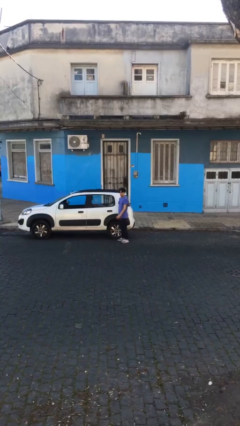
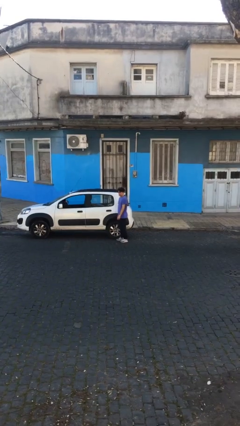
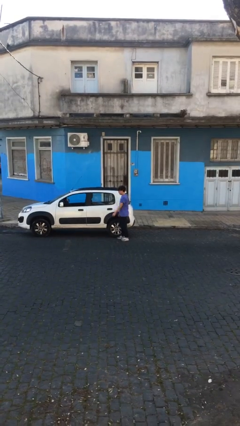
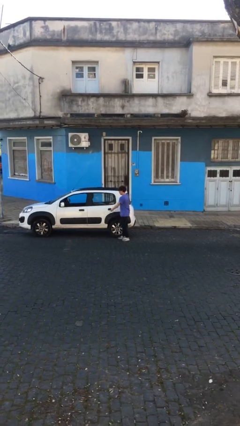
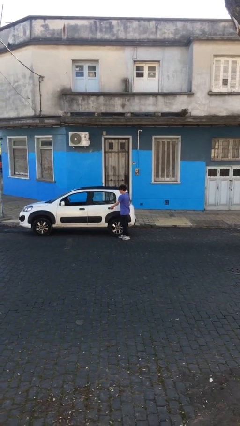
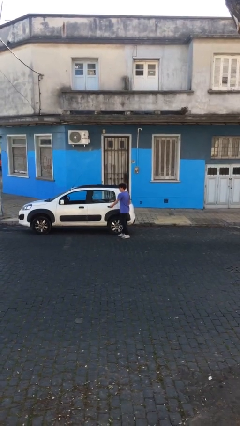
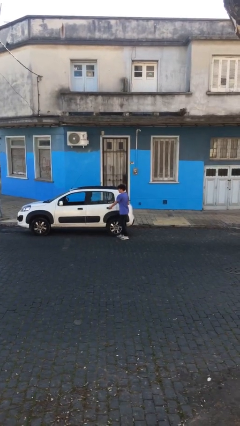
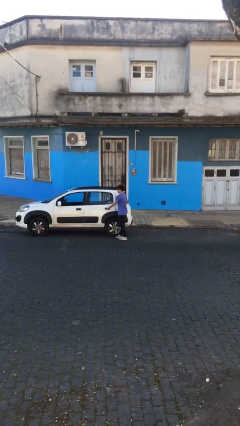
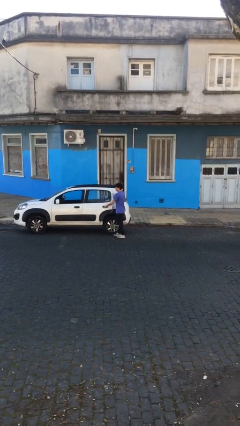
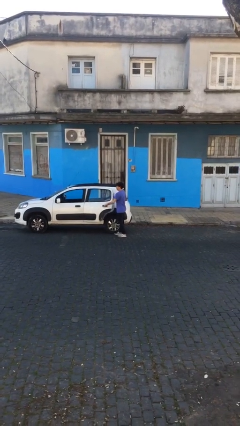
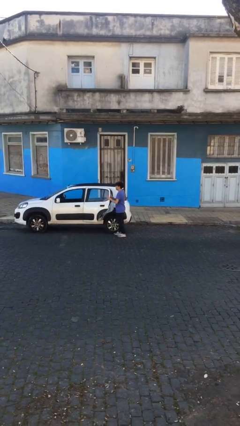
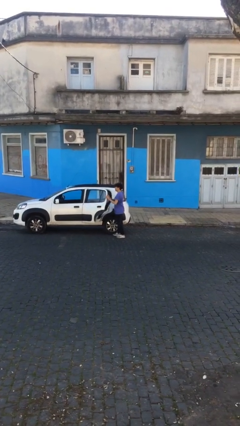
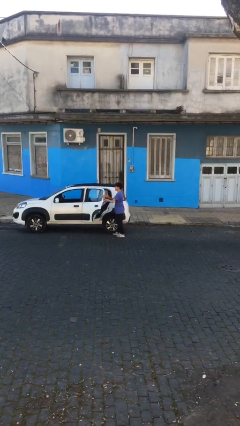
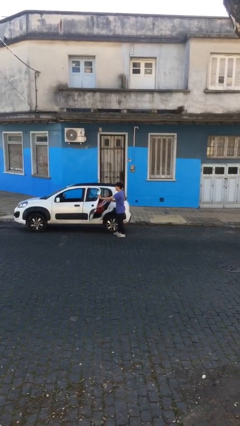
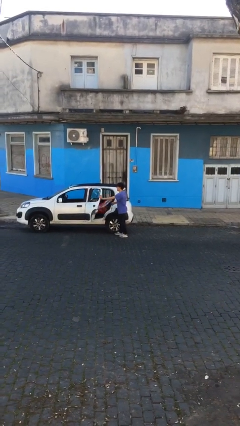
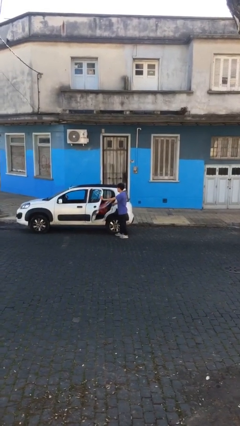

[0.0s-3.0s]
person opens car door

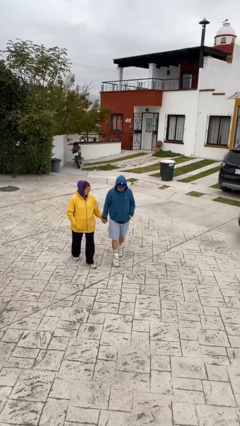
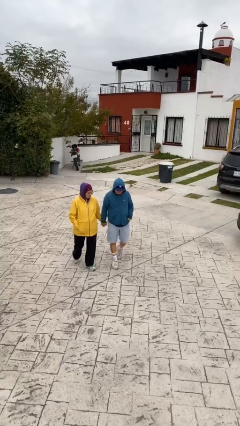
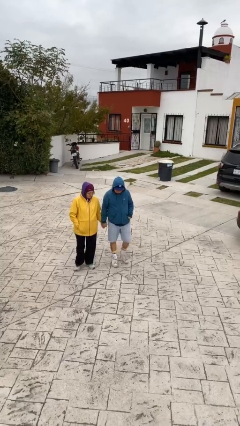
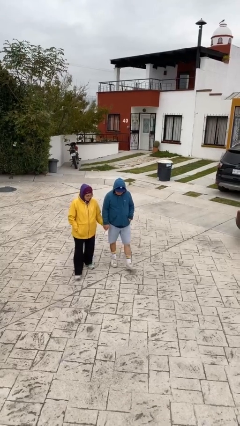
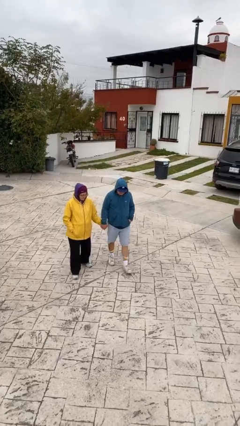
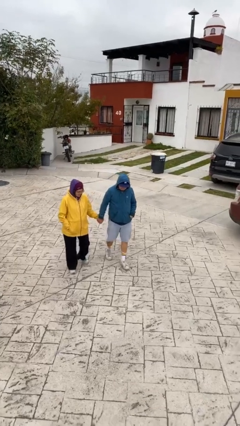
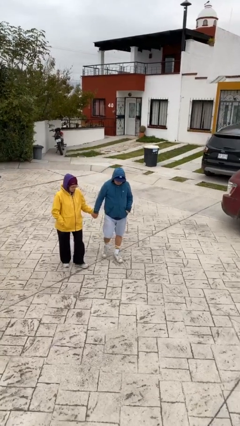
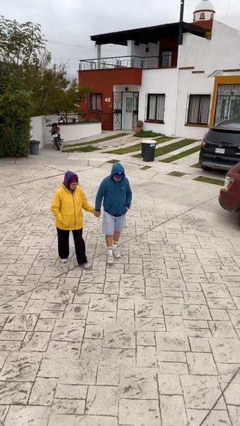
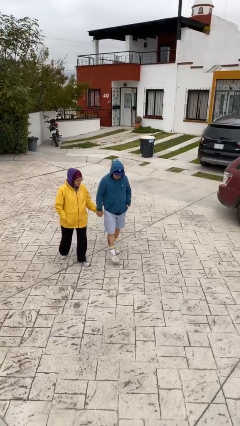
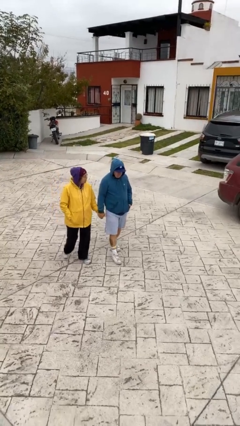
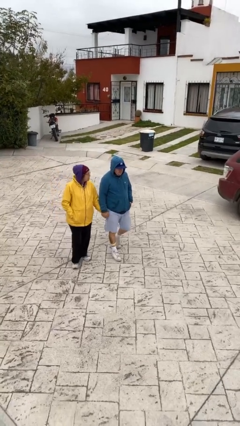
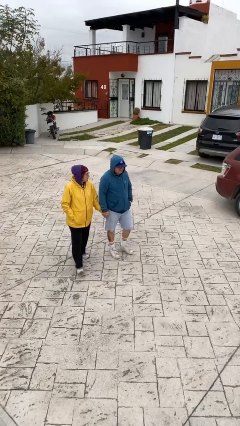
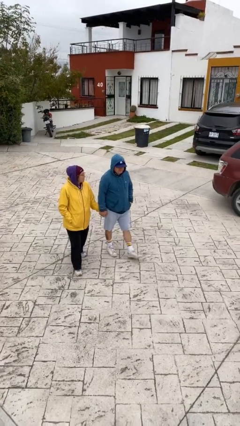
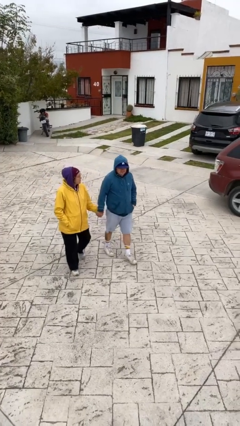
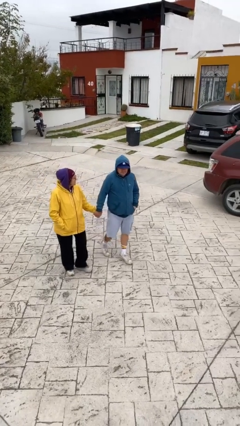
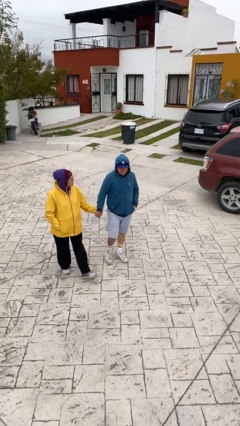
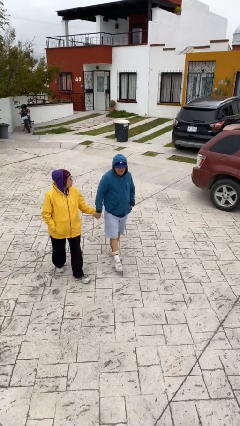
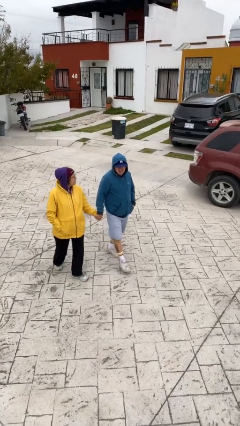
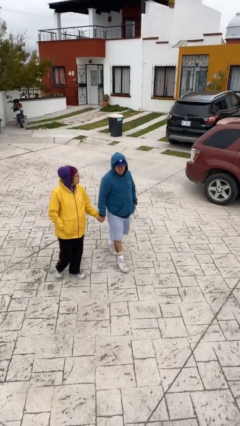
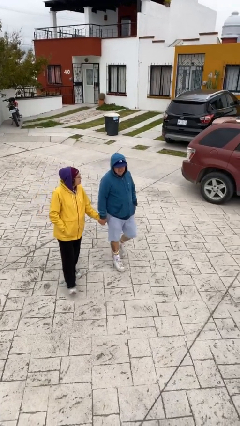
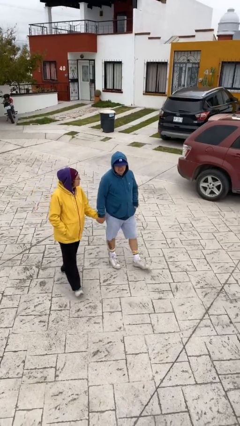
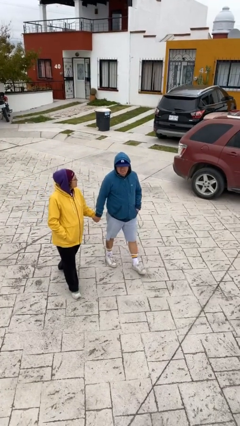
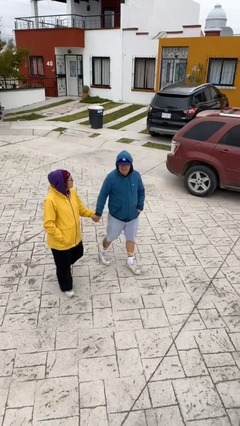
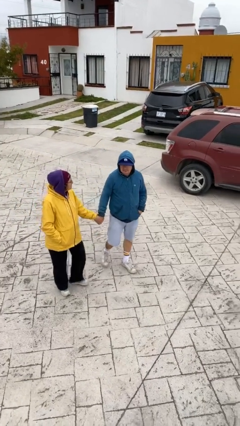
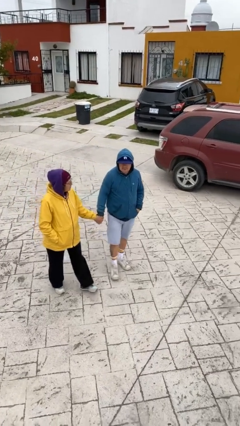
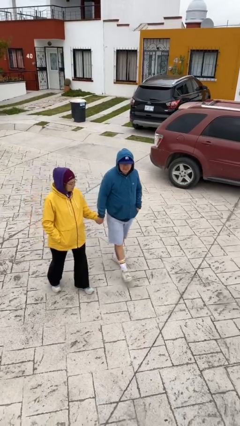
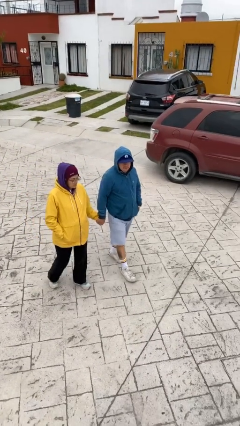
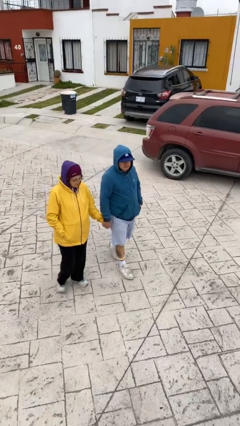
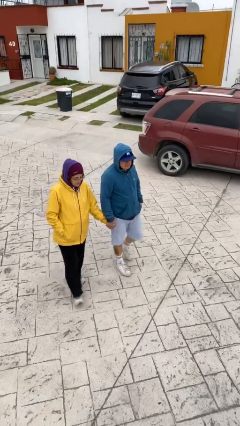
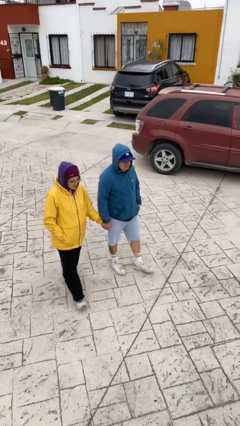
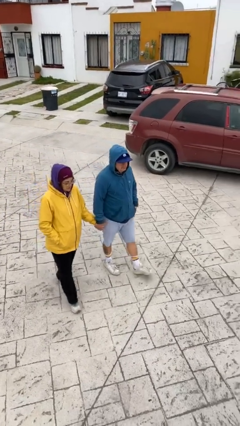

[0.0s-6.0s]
person holds hand

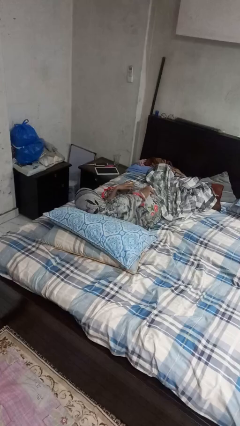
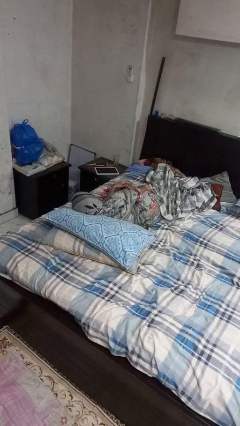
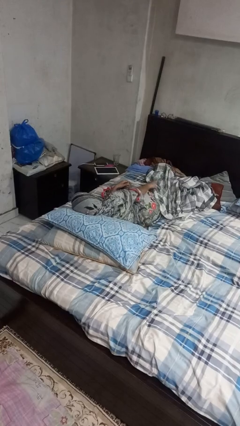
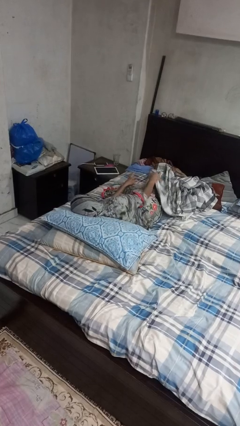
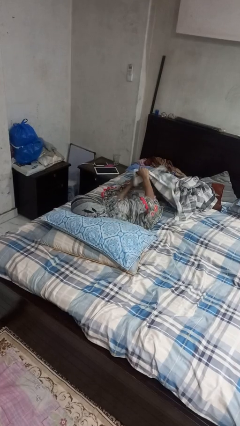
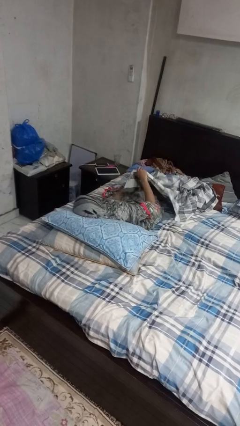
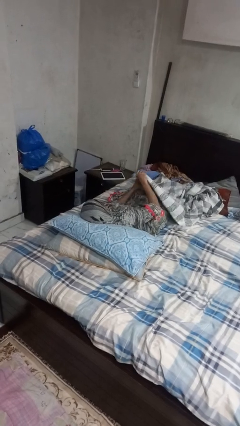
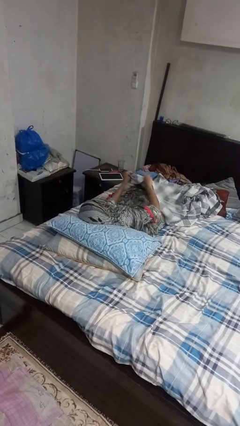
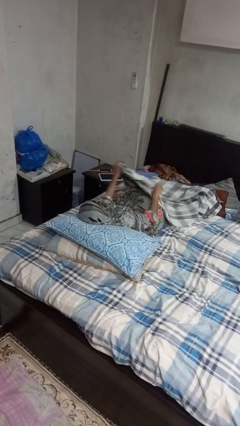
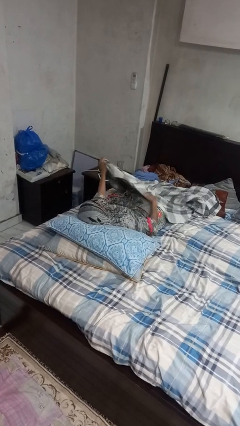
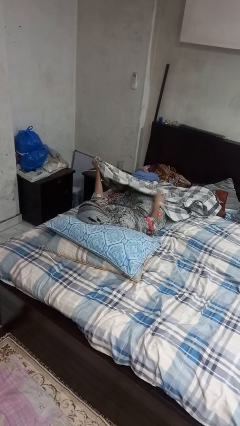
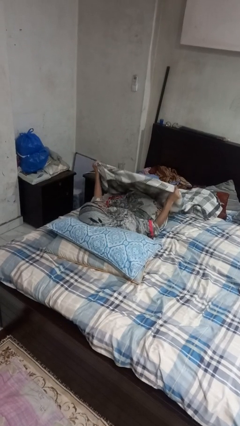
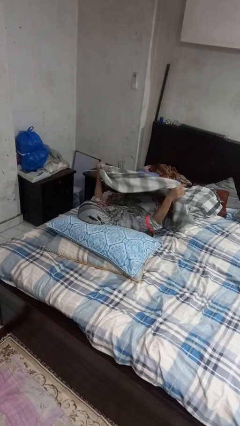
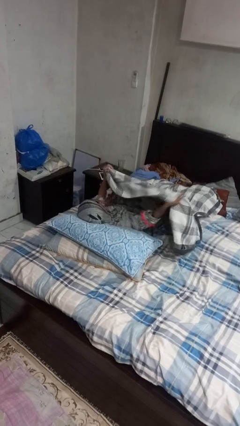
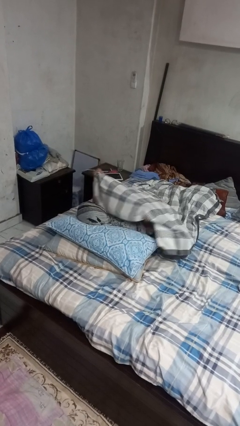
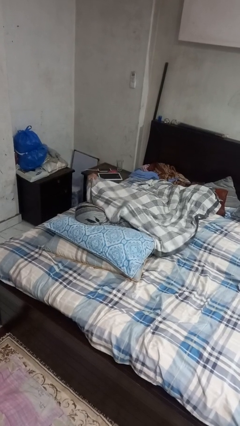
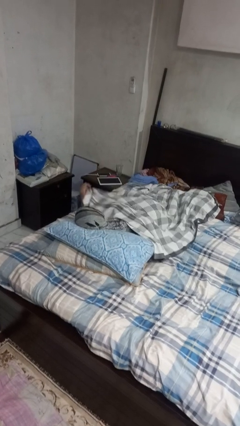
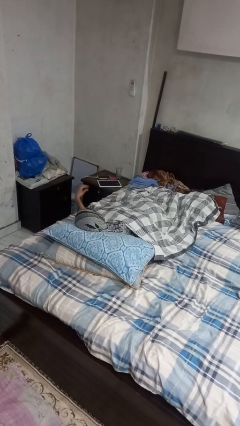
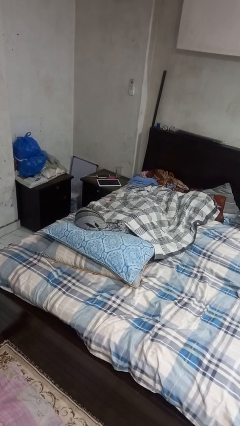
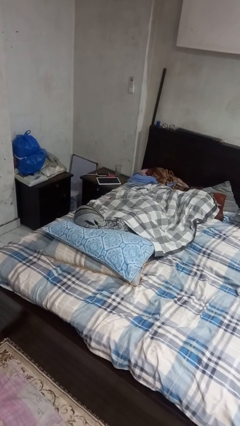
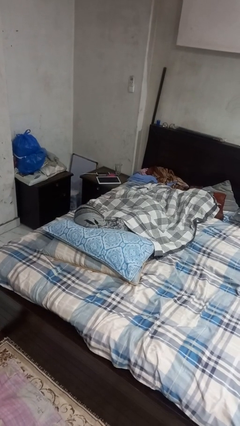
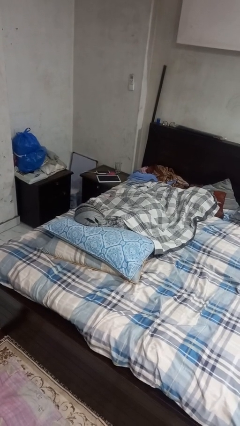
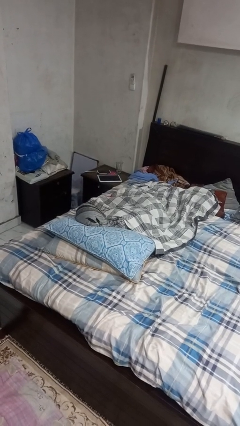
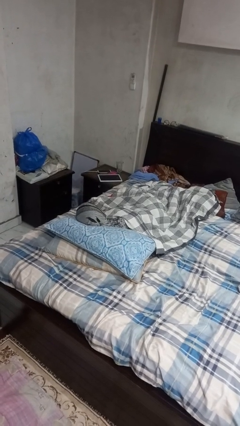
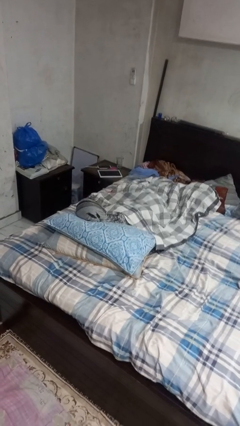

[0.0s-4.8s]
person covers with bedsheets

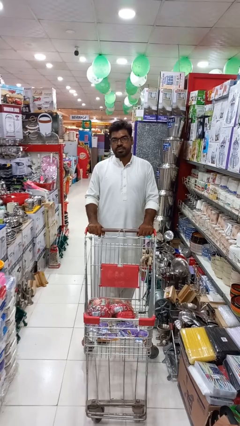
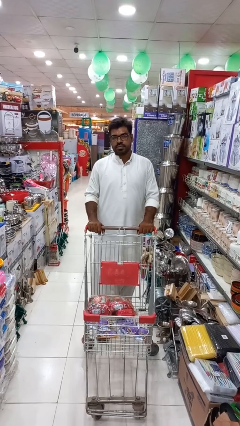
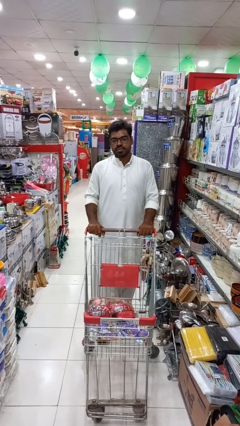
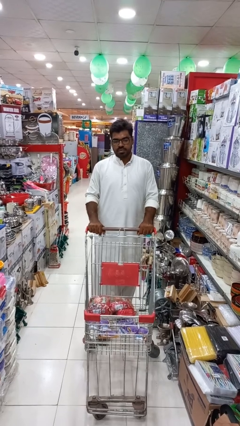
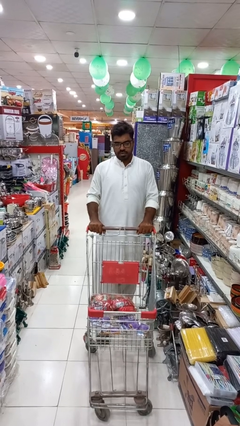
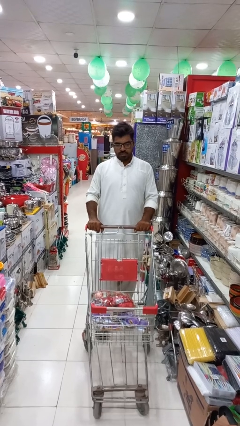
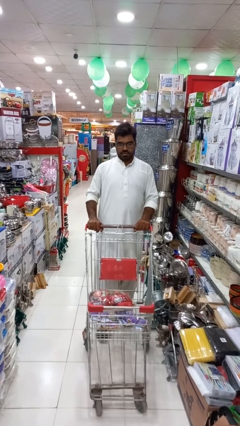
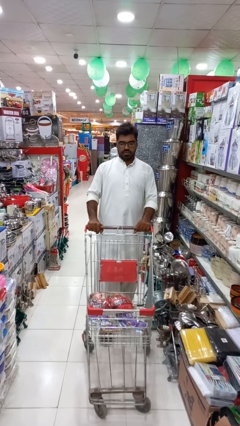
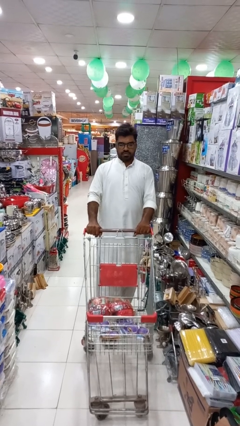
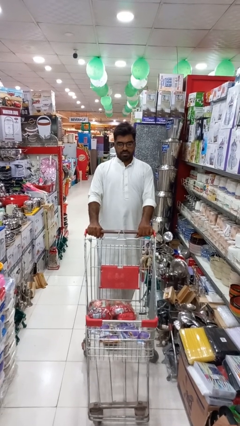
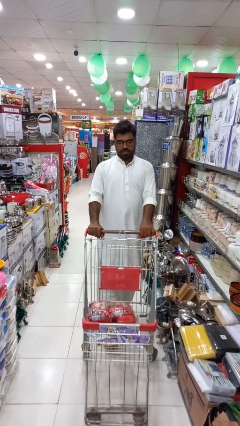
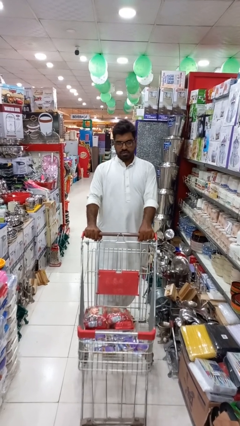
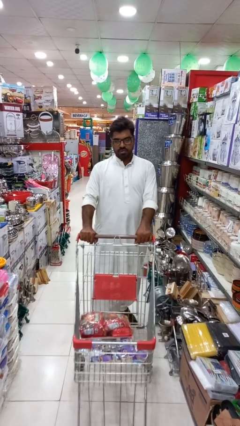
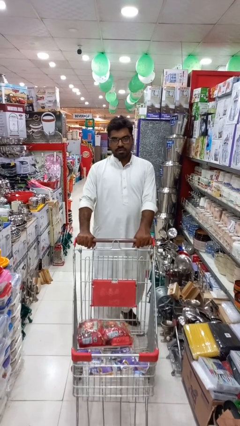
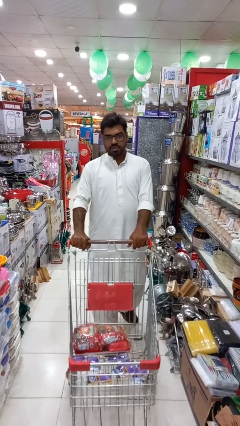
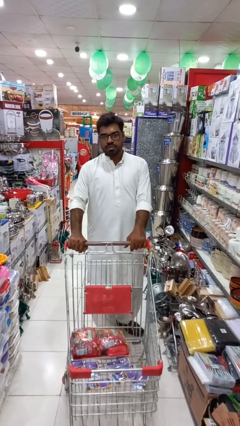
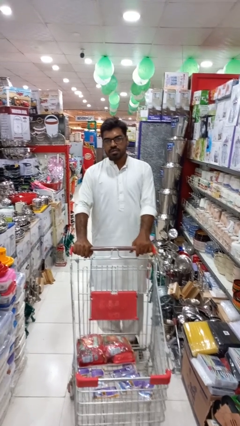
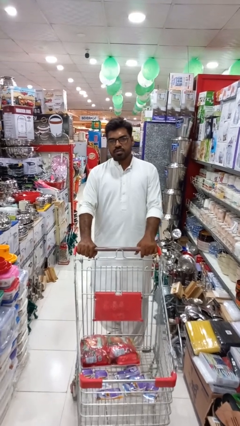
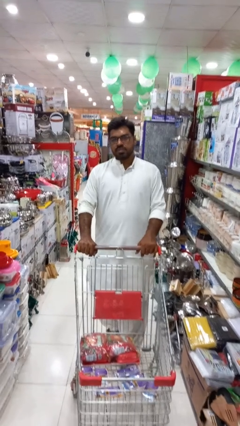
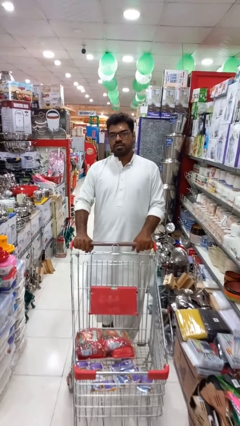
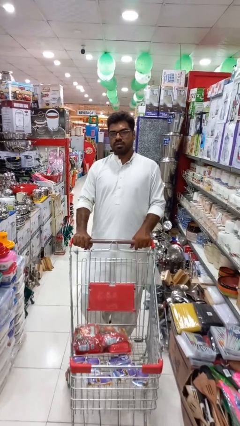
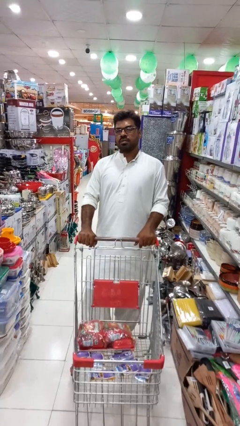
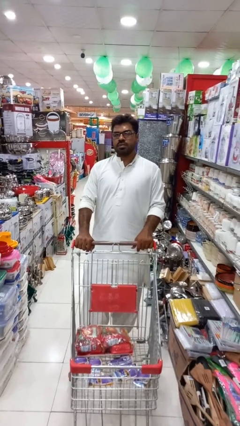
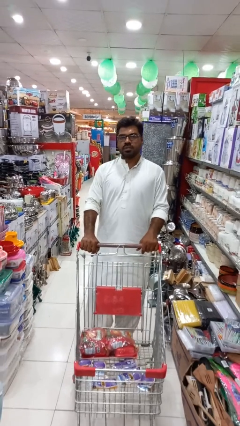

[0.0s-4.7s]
person pushes wheeled cart
